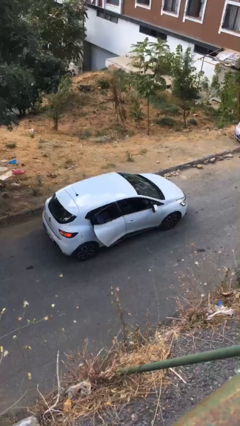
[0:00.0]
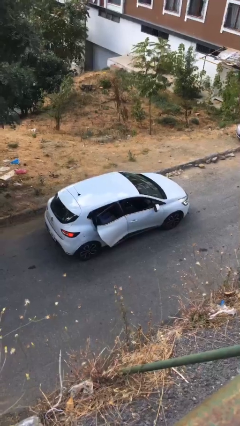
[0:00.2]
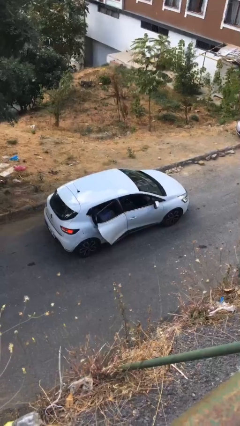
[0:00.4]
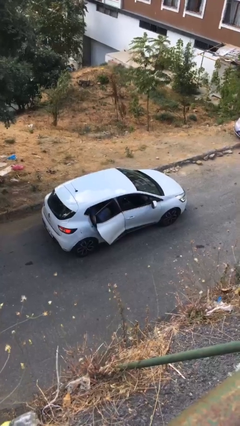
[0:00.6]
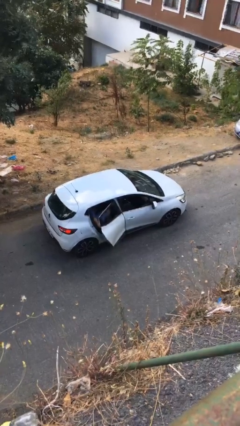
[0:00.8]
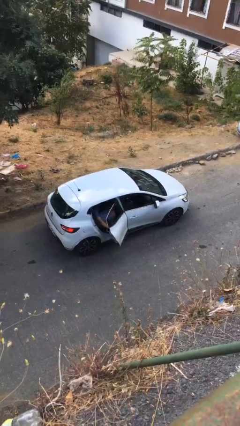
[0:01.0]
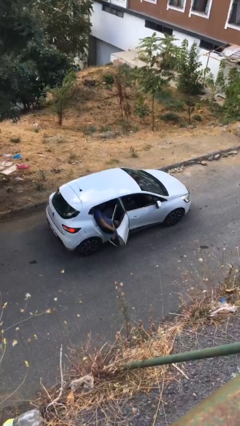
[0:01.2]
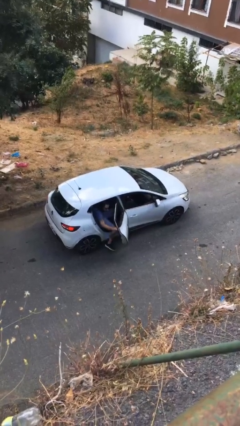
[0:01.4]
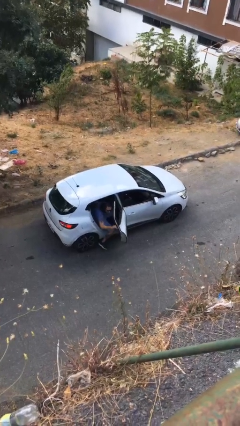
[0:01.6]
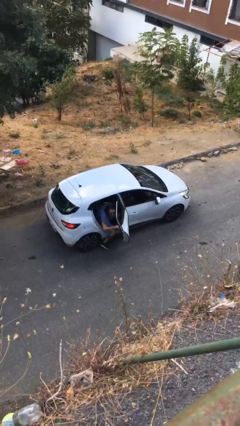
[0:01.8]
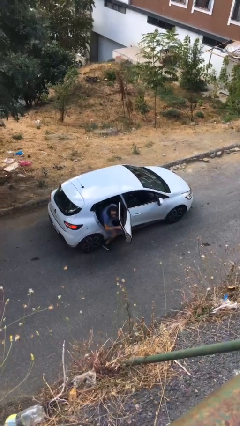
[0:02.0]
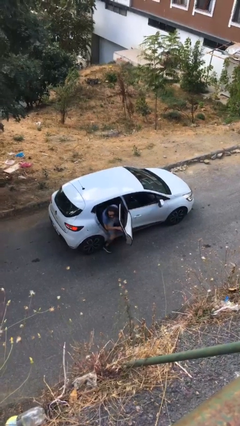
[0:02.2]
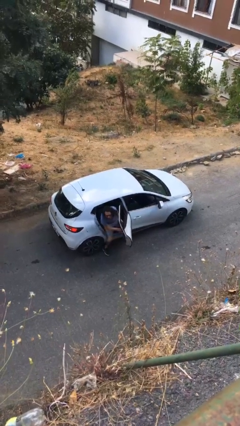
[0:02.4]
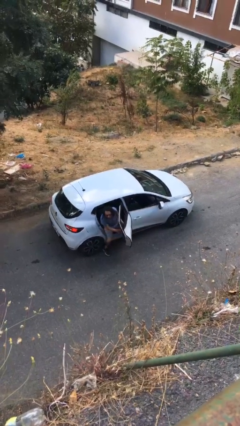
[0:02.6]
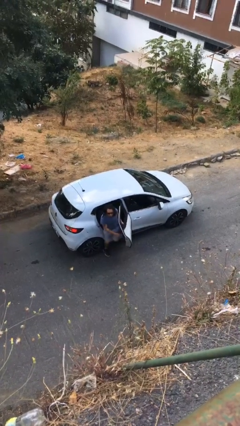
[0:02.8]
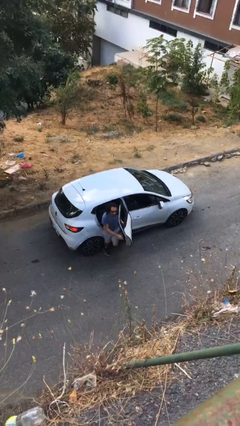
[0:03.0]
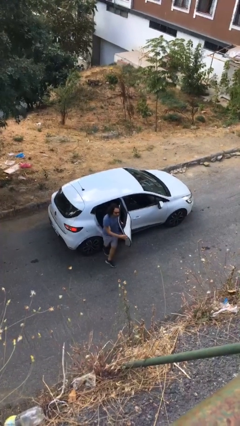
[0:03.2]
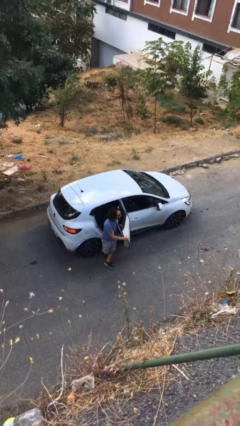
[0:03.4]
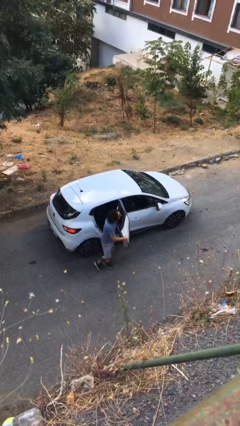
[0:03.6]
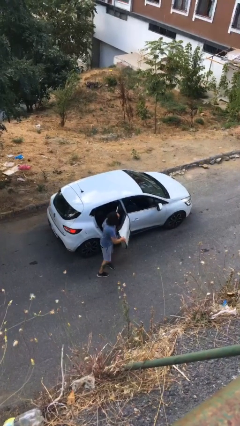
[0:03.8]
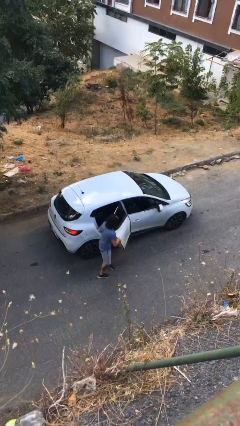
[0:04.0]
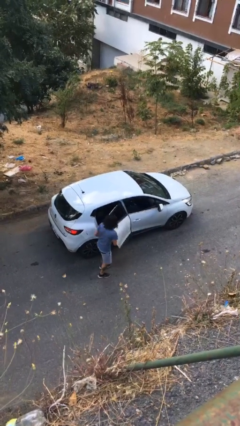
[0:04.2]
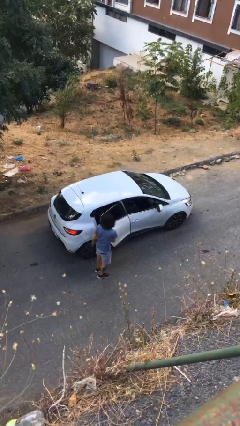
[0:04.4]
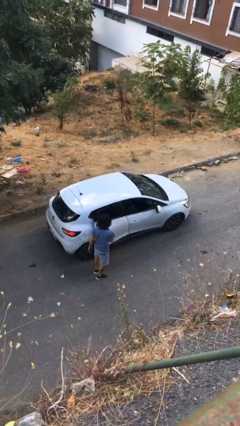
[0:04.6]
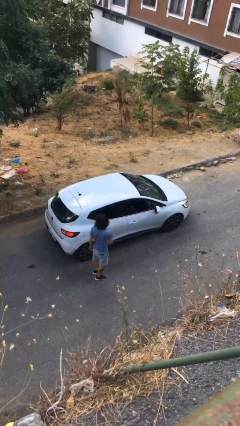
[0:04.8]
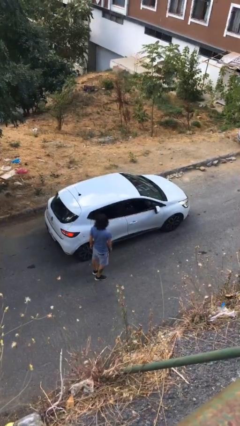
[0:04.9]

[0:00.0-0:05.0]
car drops off person

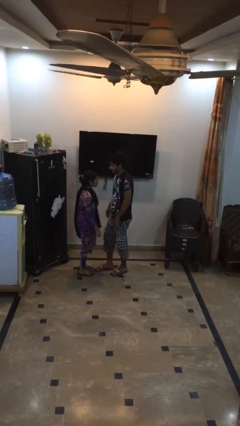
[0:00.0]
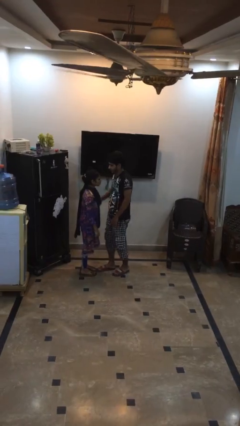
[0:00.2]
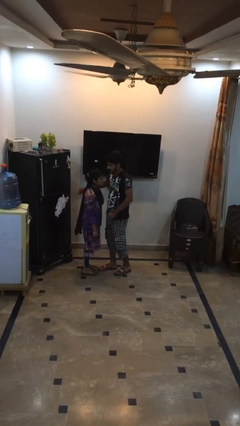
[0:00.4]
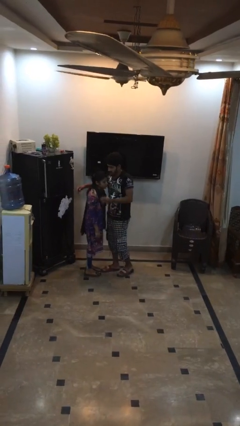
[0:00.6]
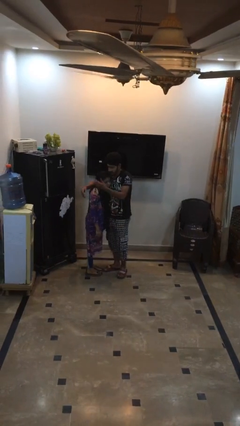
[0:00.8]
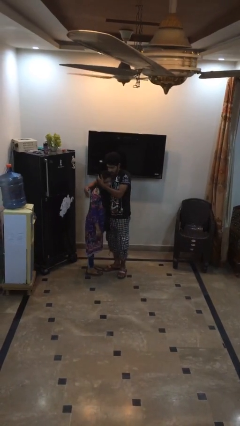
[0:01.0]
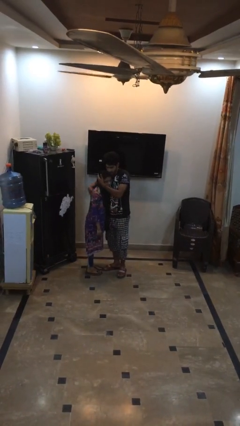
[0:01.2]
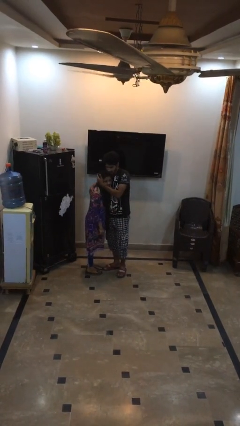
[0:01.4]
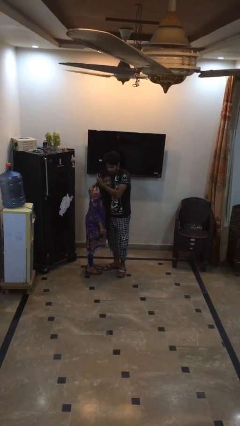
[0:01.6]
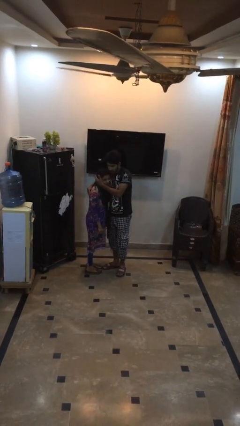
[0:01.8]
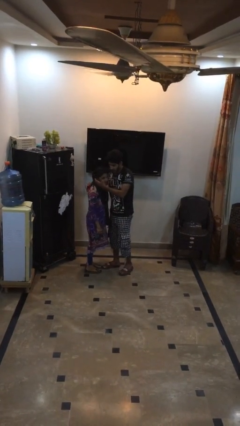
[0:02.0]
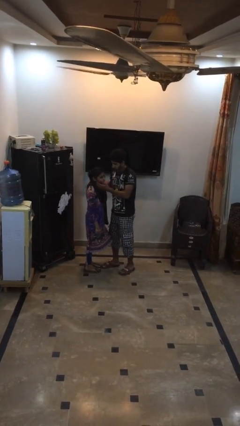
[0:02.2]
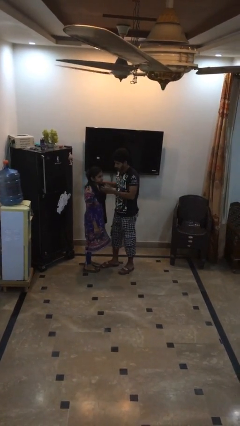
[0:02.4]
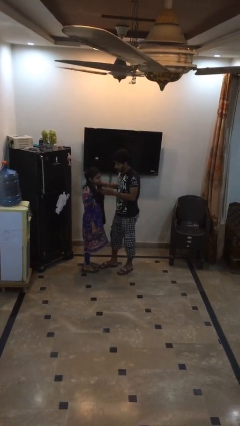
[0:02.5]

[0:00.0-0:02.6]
person embraces person

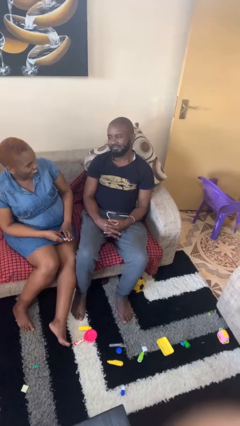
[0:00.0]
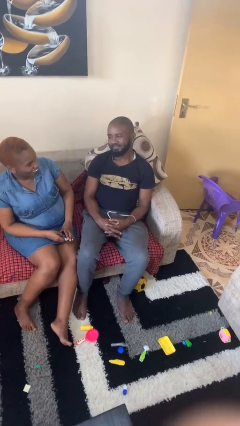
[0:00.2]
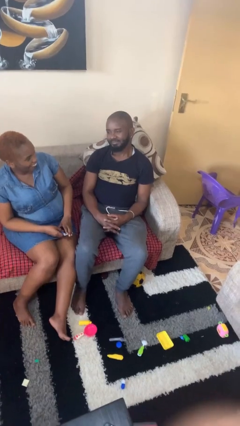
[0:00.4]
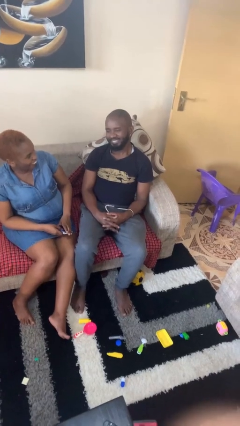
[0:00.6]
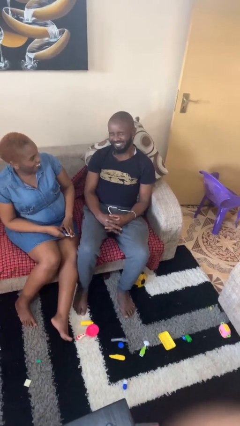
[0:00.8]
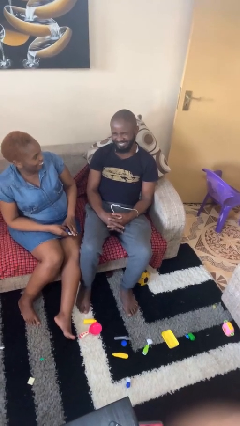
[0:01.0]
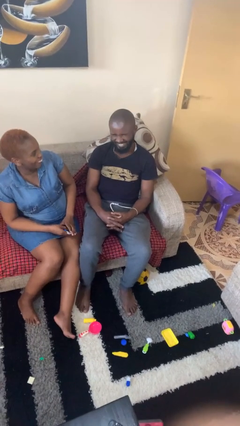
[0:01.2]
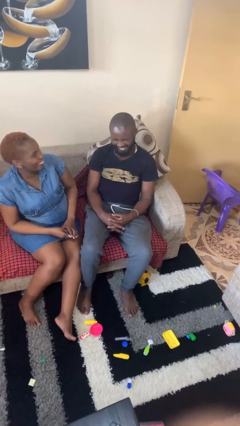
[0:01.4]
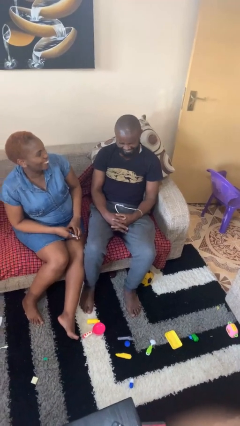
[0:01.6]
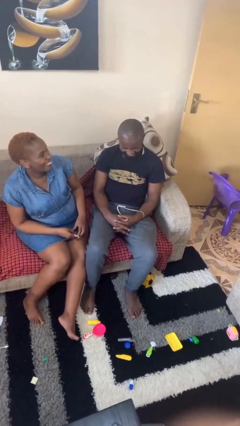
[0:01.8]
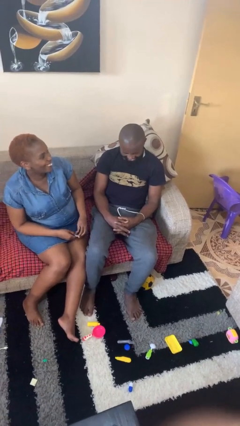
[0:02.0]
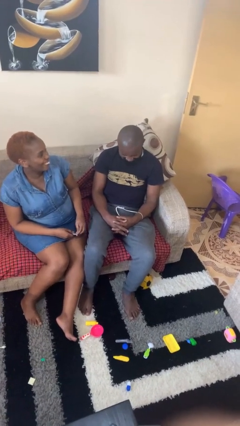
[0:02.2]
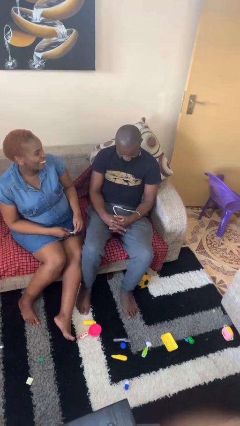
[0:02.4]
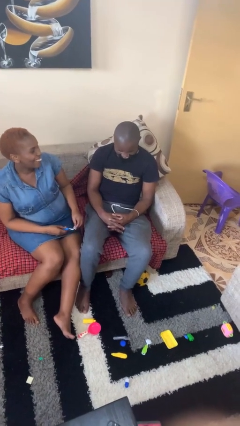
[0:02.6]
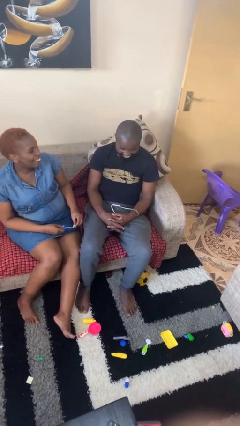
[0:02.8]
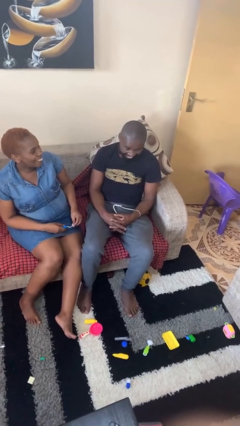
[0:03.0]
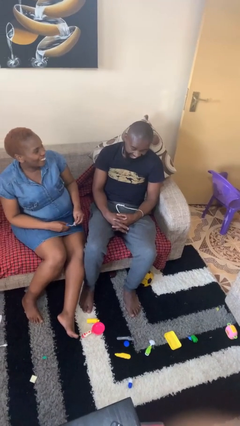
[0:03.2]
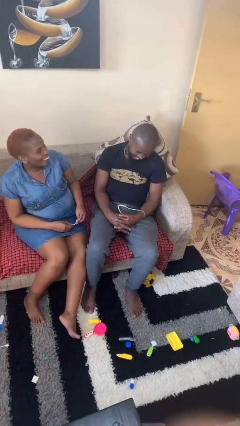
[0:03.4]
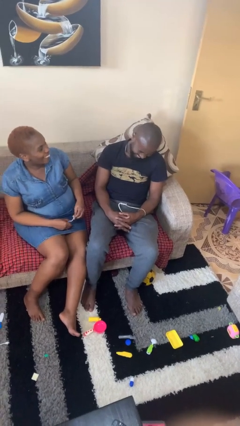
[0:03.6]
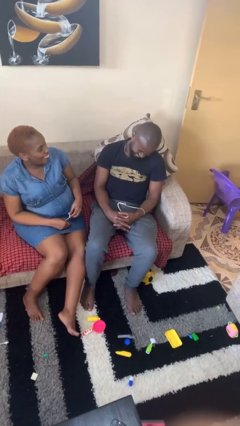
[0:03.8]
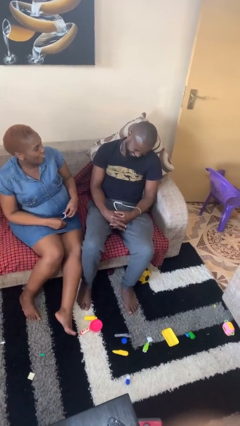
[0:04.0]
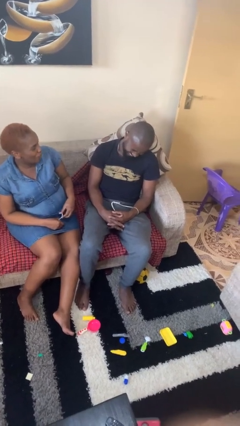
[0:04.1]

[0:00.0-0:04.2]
person laughs with person

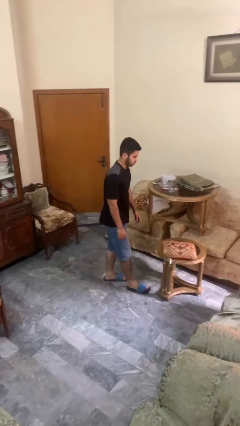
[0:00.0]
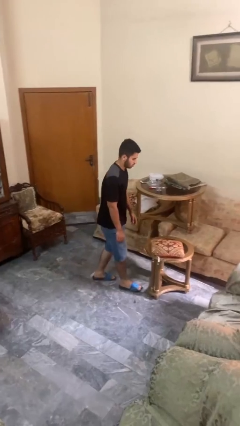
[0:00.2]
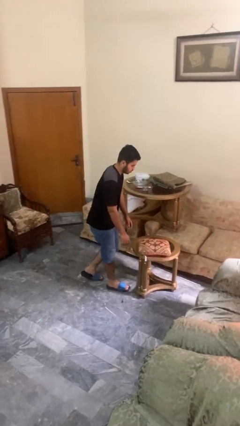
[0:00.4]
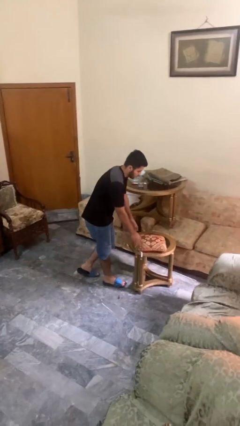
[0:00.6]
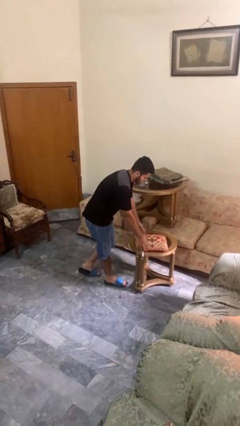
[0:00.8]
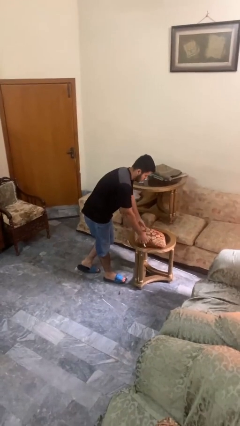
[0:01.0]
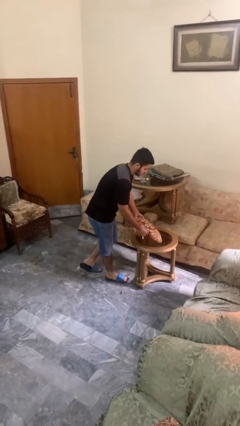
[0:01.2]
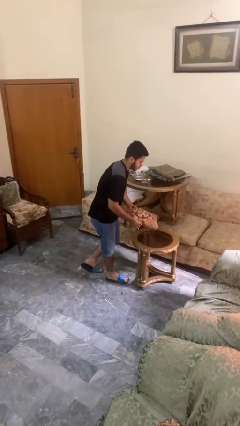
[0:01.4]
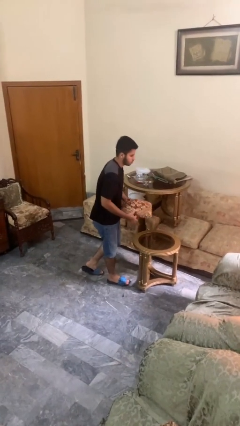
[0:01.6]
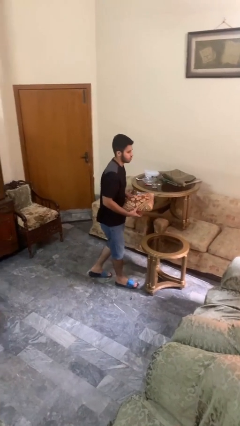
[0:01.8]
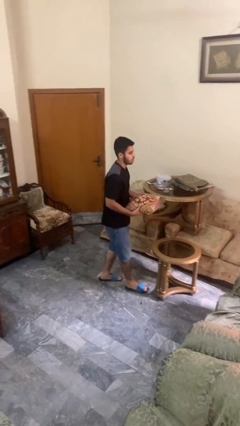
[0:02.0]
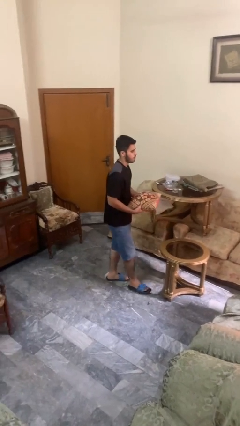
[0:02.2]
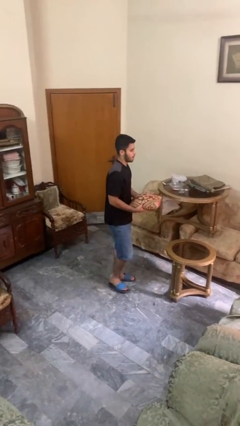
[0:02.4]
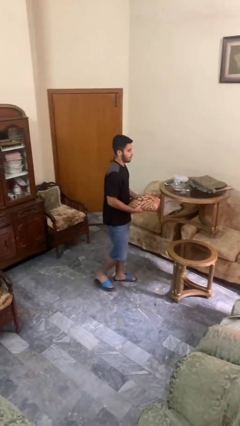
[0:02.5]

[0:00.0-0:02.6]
person picks up object from table

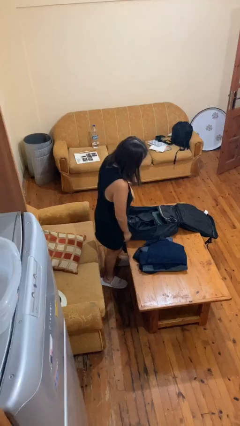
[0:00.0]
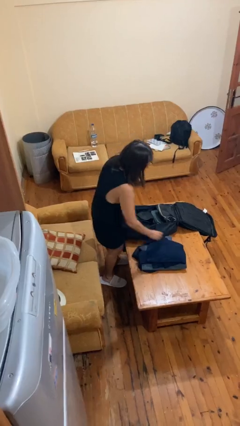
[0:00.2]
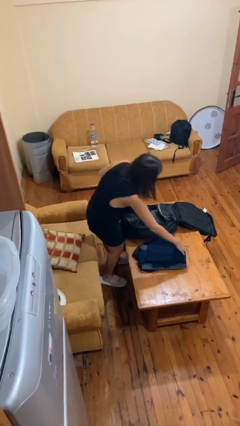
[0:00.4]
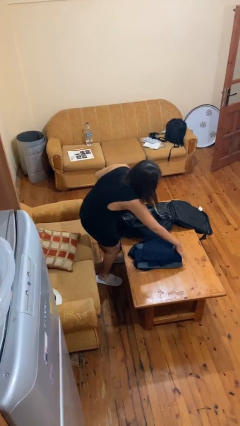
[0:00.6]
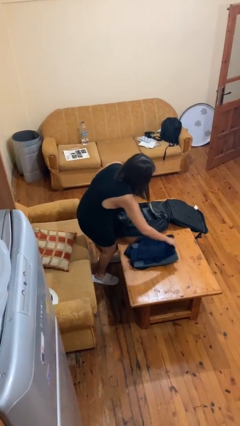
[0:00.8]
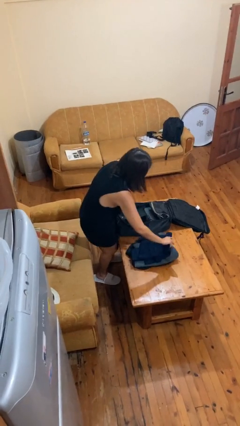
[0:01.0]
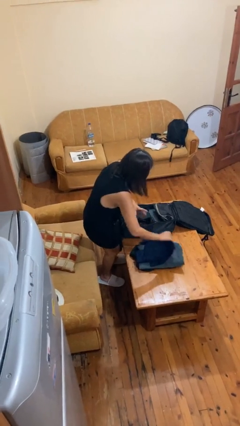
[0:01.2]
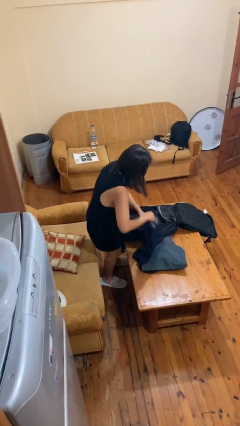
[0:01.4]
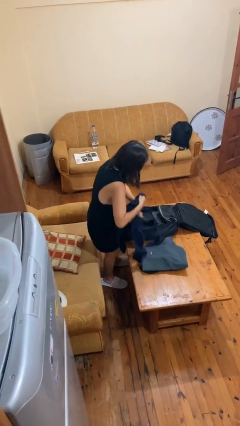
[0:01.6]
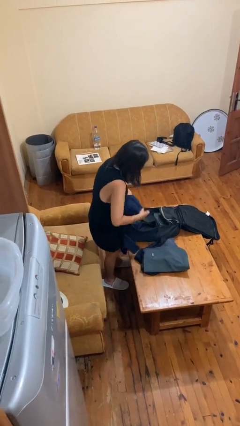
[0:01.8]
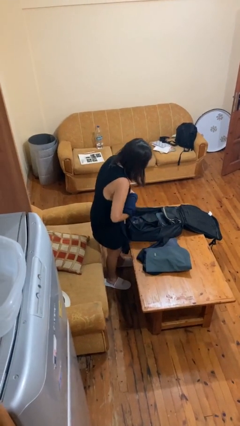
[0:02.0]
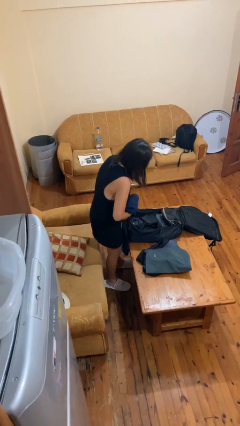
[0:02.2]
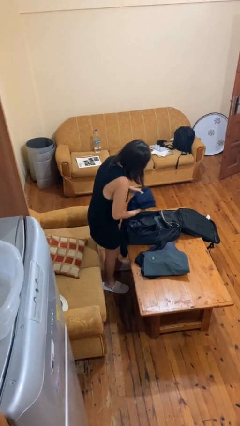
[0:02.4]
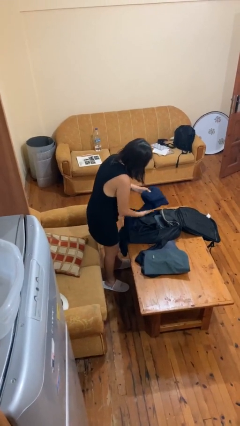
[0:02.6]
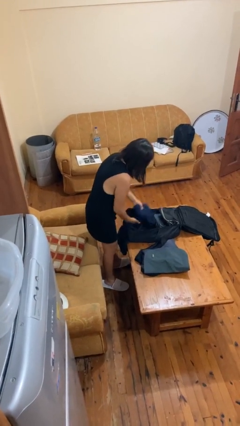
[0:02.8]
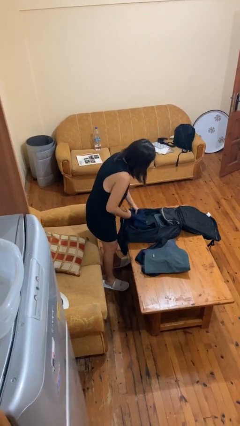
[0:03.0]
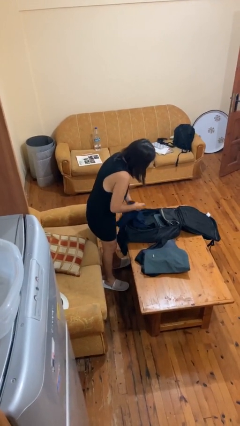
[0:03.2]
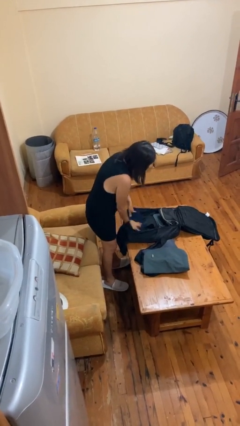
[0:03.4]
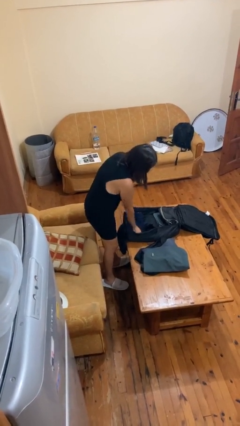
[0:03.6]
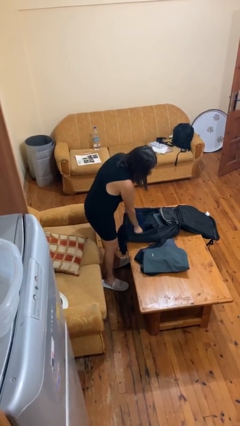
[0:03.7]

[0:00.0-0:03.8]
person loads clothes into suitcase
